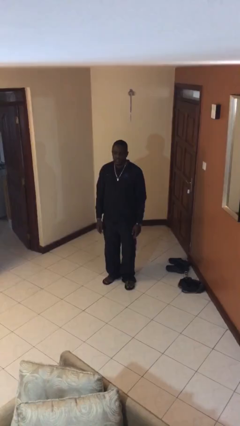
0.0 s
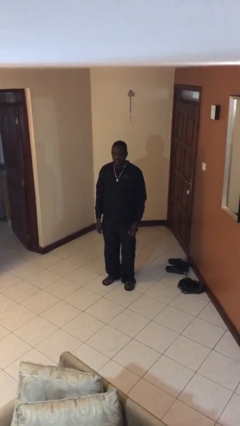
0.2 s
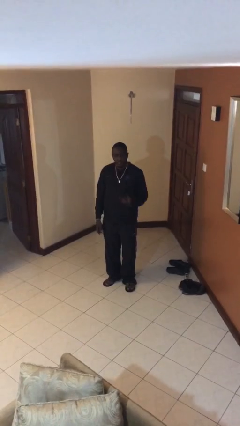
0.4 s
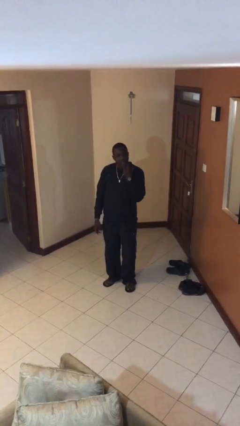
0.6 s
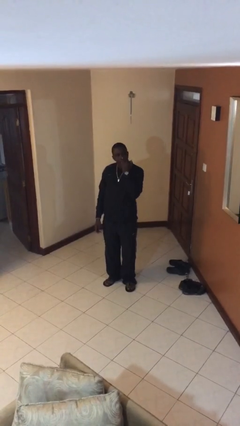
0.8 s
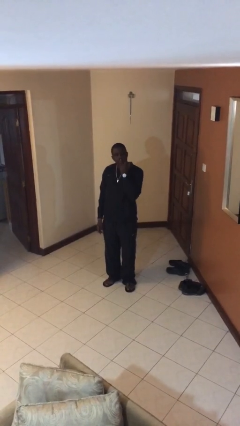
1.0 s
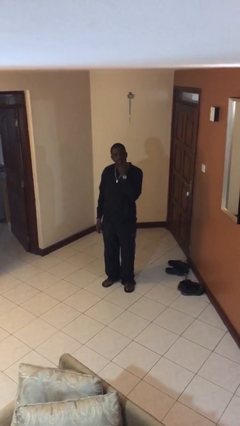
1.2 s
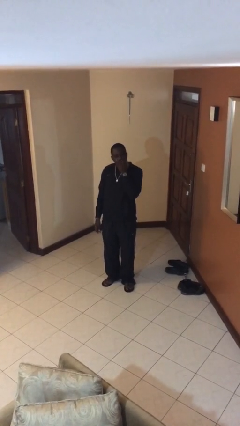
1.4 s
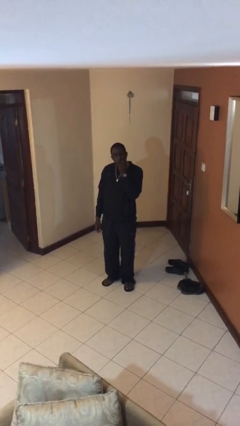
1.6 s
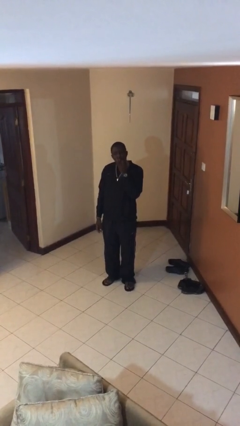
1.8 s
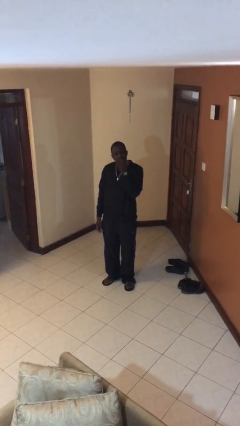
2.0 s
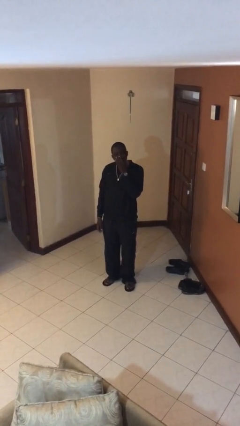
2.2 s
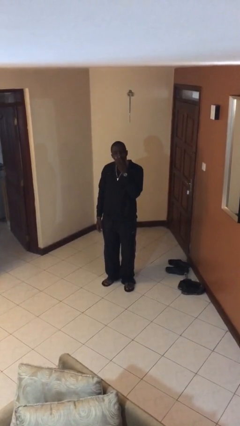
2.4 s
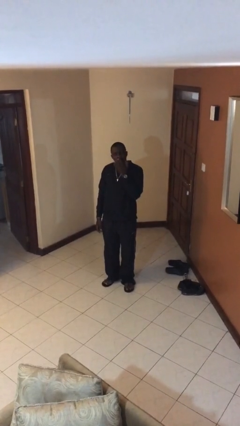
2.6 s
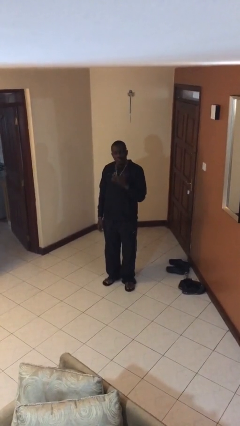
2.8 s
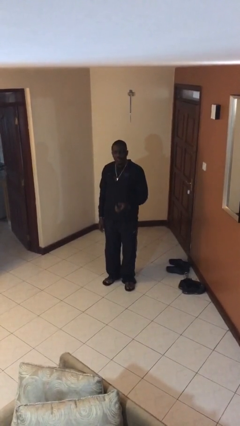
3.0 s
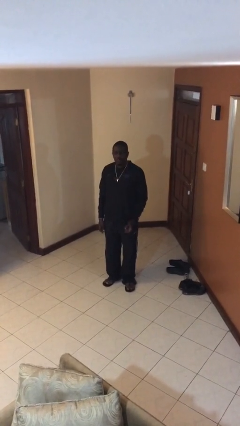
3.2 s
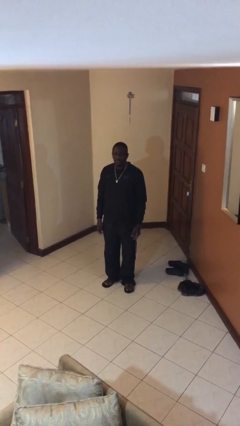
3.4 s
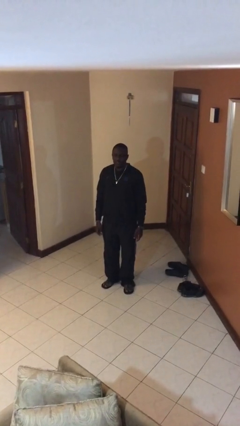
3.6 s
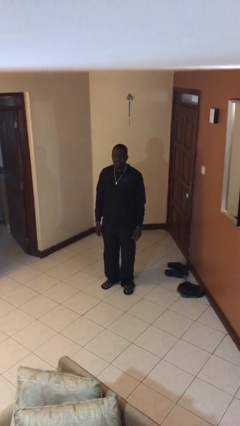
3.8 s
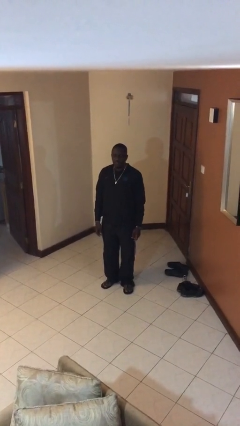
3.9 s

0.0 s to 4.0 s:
person licks fingers

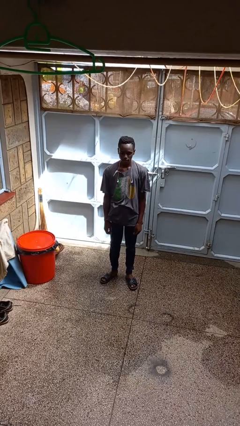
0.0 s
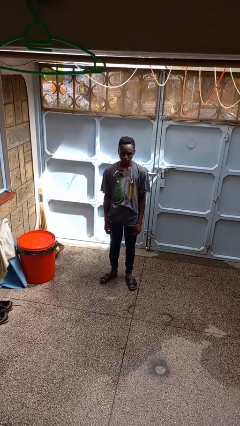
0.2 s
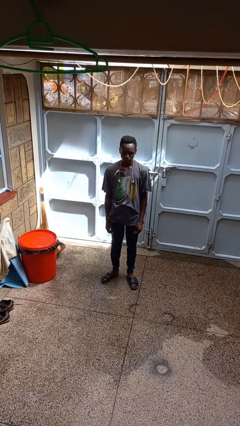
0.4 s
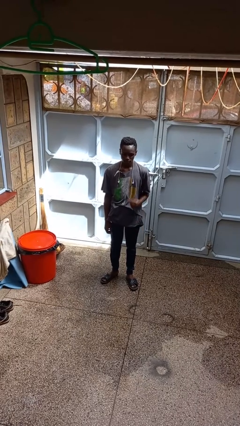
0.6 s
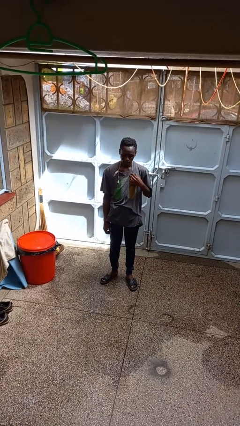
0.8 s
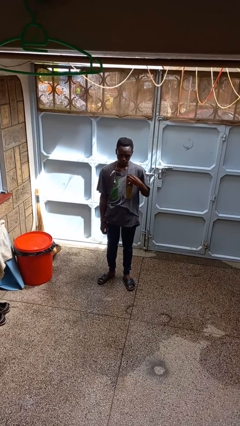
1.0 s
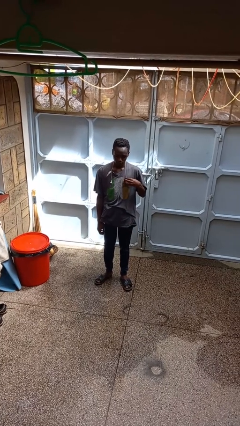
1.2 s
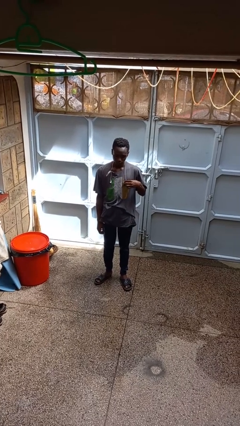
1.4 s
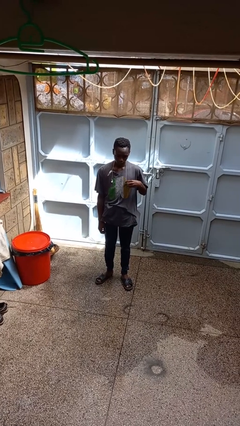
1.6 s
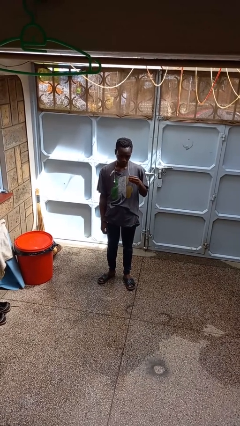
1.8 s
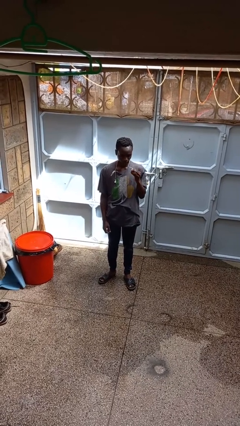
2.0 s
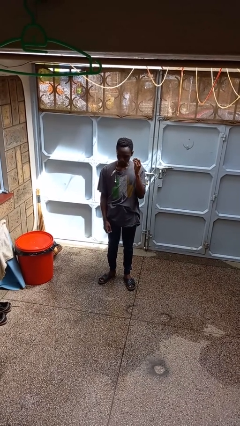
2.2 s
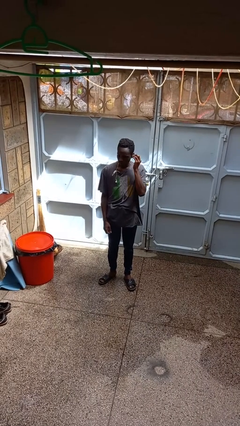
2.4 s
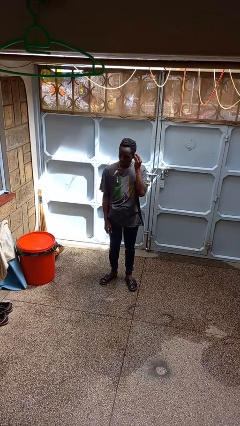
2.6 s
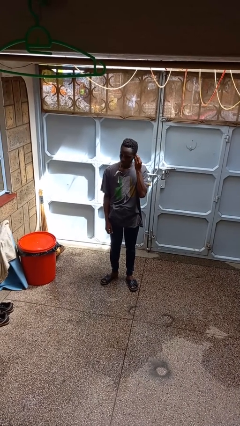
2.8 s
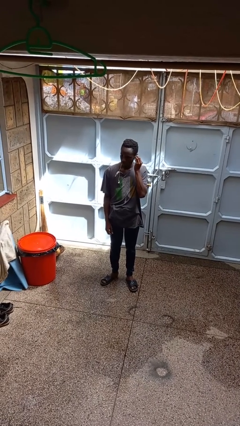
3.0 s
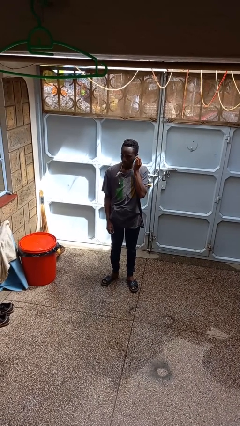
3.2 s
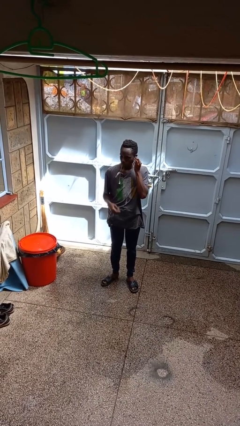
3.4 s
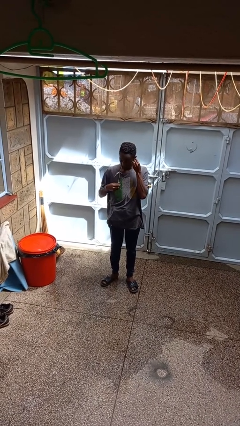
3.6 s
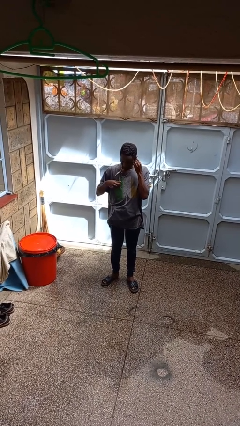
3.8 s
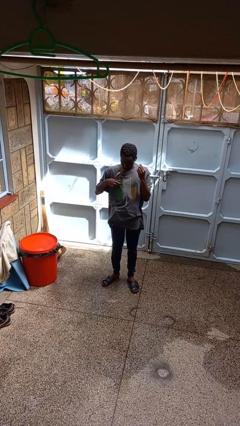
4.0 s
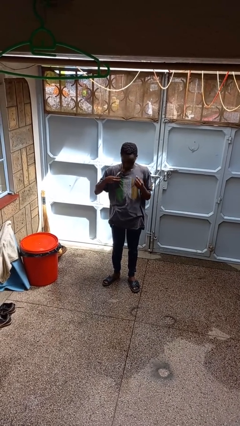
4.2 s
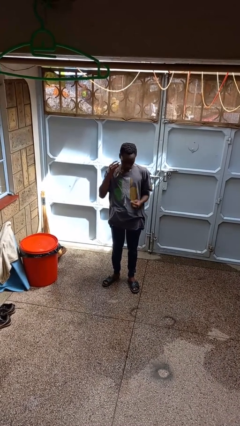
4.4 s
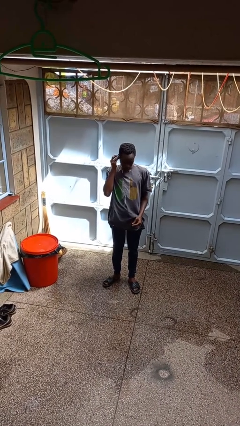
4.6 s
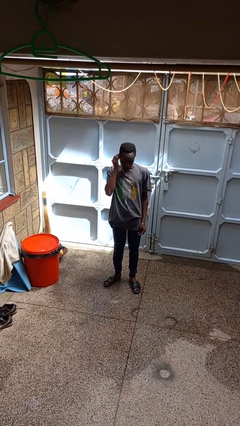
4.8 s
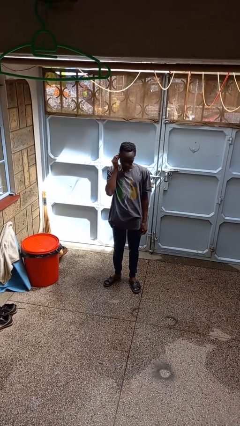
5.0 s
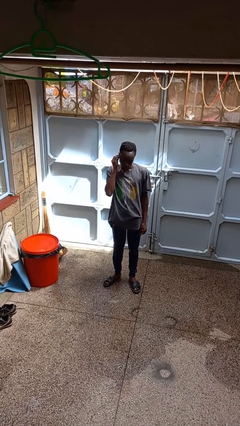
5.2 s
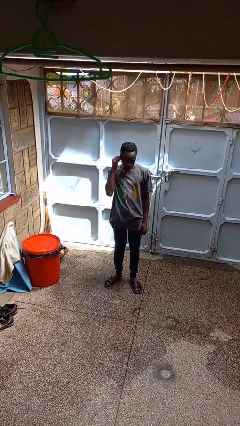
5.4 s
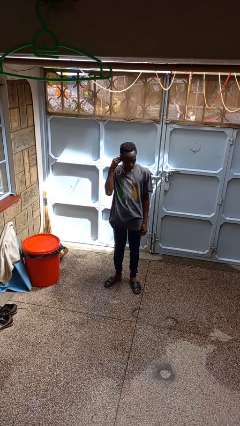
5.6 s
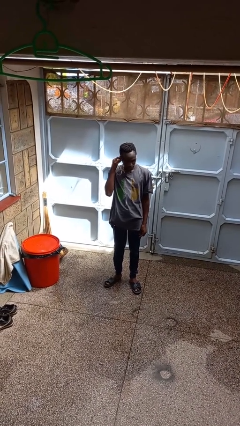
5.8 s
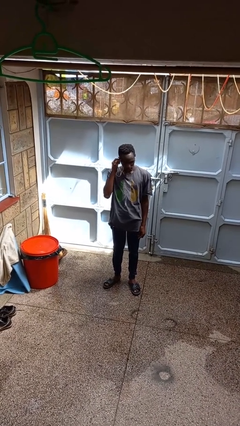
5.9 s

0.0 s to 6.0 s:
person puts on headphones

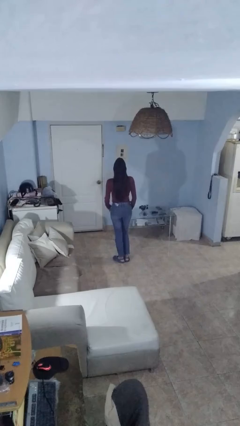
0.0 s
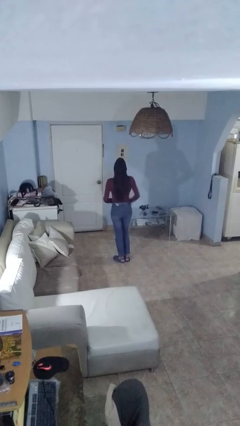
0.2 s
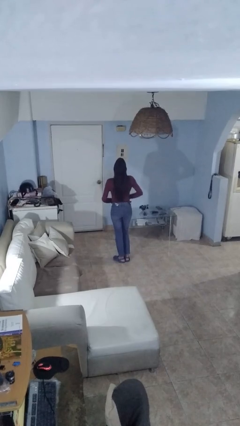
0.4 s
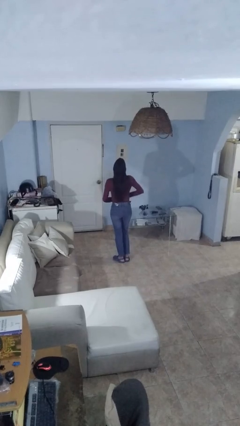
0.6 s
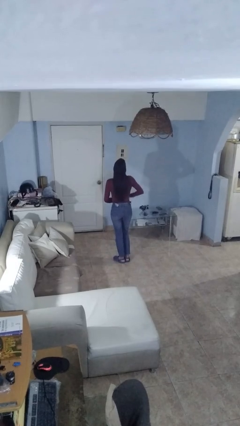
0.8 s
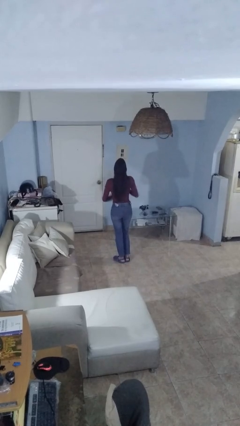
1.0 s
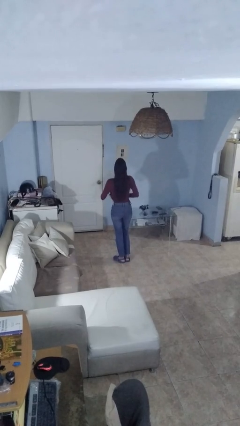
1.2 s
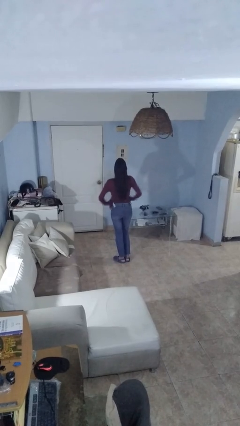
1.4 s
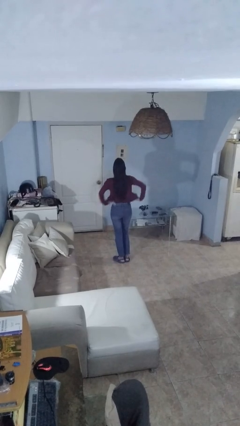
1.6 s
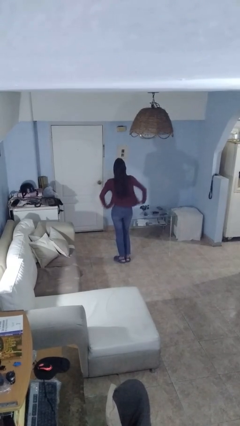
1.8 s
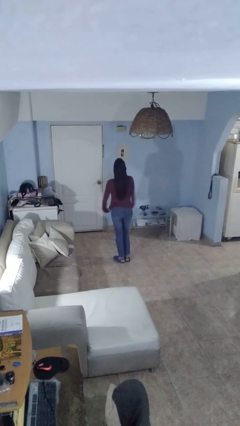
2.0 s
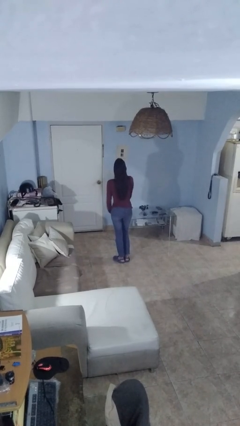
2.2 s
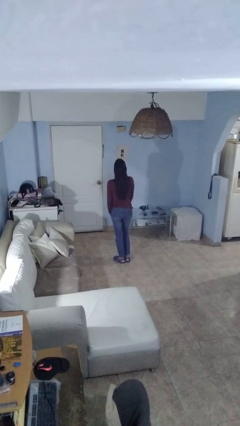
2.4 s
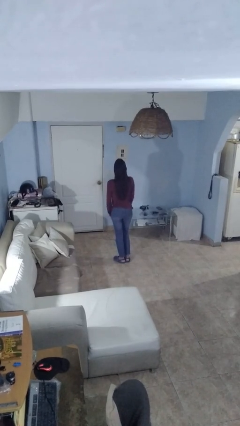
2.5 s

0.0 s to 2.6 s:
person untucks shirt

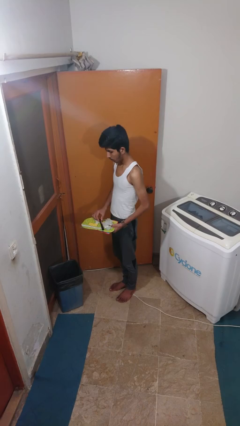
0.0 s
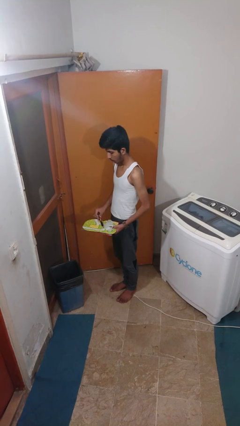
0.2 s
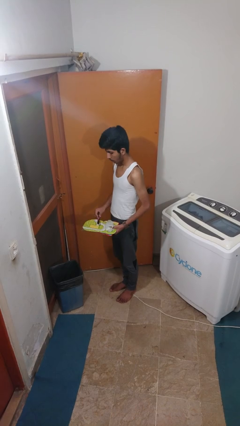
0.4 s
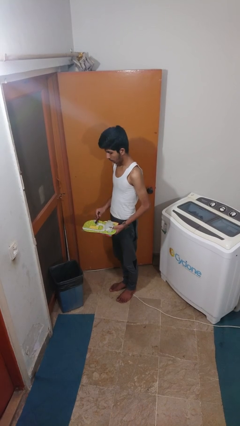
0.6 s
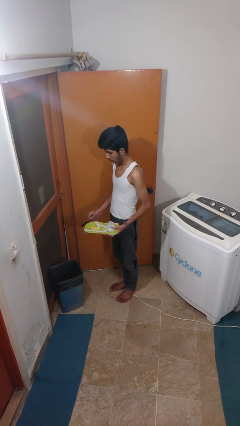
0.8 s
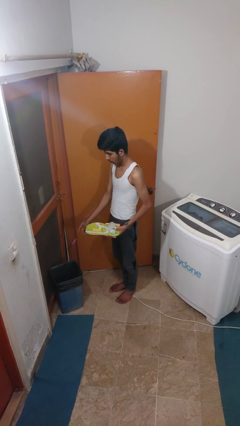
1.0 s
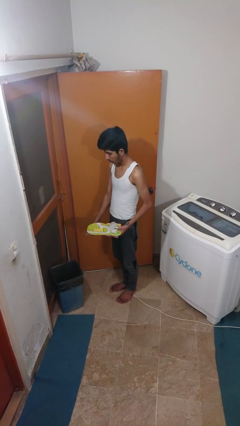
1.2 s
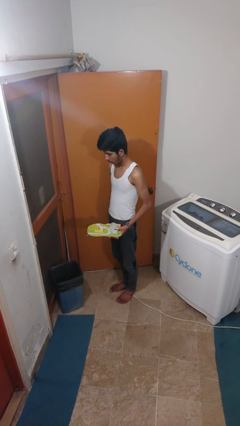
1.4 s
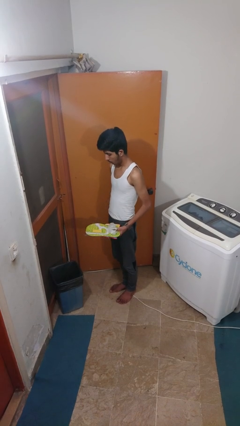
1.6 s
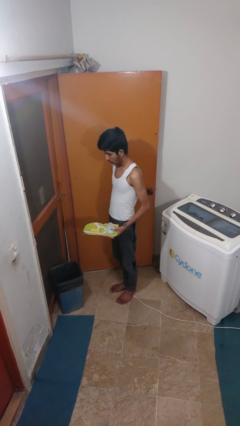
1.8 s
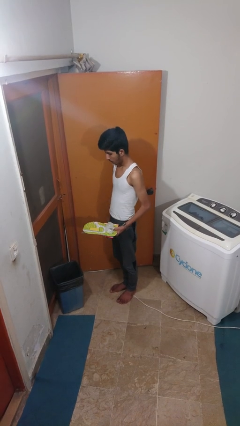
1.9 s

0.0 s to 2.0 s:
person discards trash

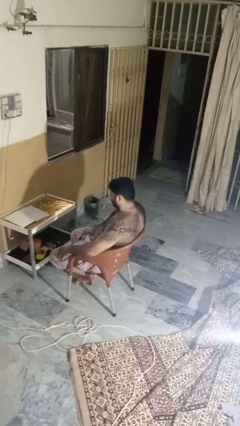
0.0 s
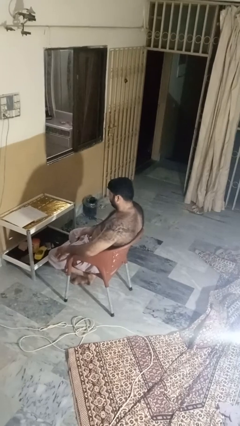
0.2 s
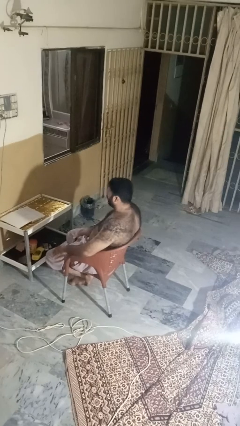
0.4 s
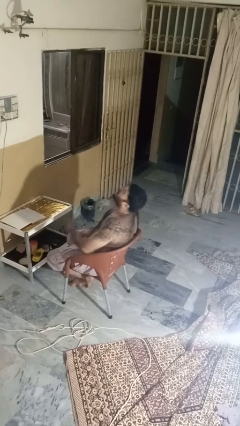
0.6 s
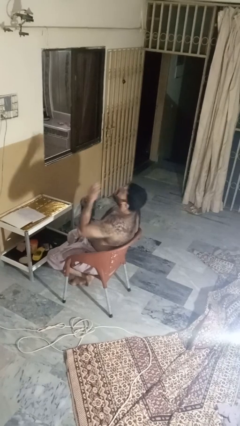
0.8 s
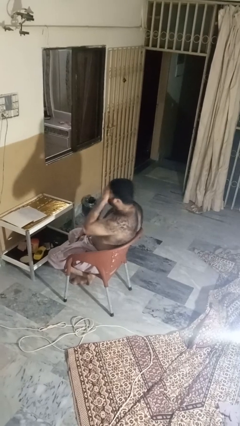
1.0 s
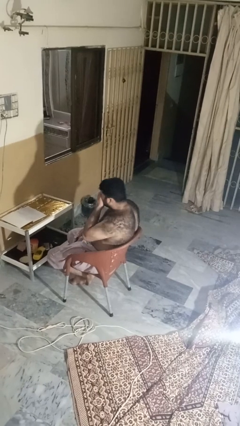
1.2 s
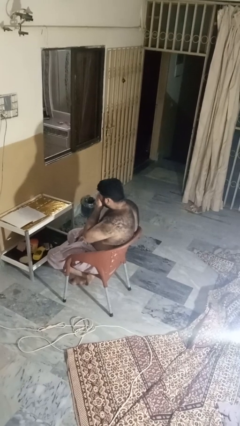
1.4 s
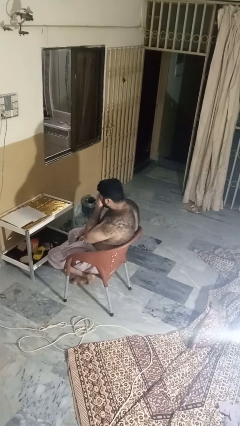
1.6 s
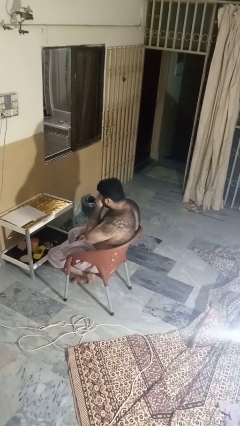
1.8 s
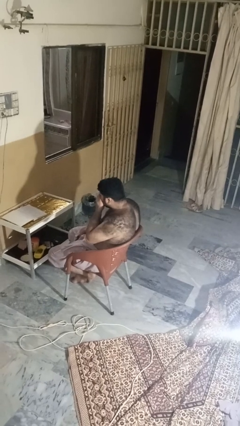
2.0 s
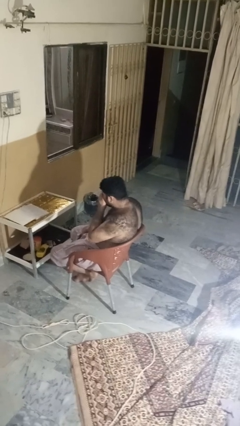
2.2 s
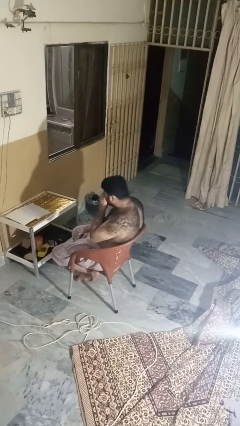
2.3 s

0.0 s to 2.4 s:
person sneezes into hand

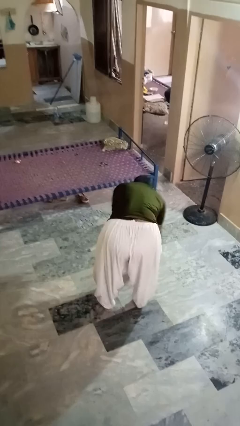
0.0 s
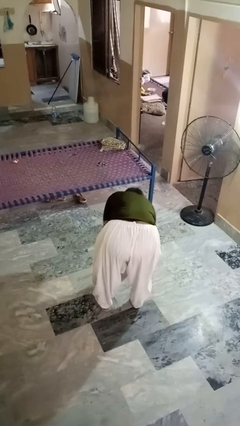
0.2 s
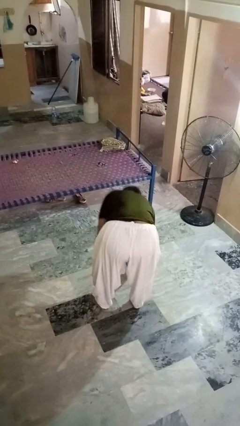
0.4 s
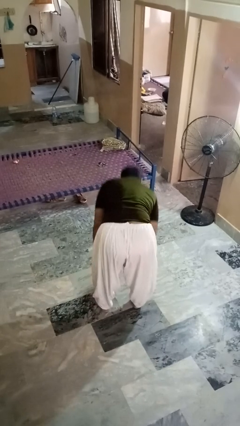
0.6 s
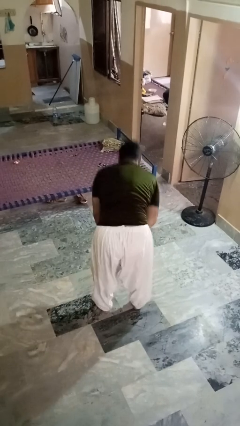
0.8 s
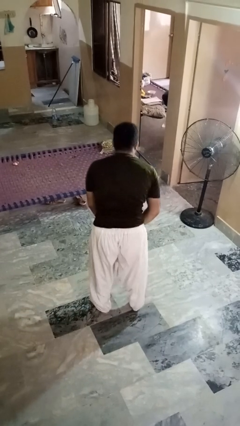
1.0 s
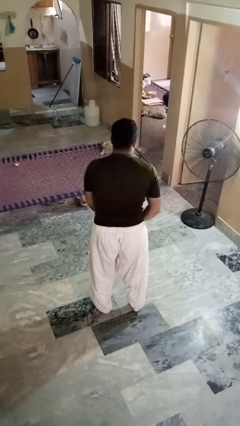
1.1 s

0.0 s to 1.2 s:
person picks up object from floor
